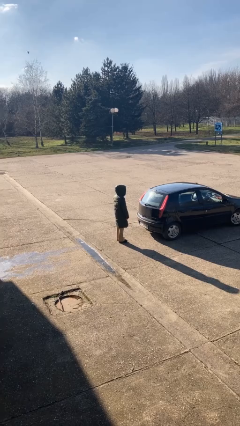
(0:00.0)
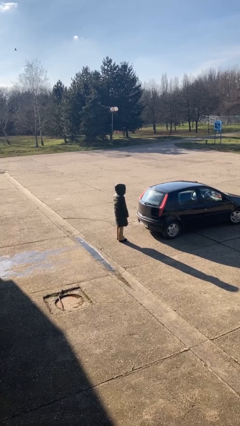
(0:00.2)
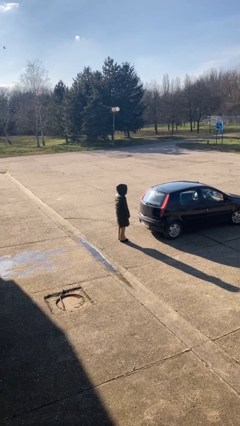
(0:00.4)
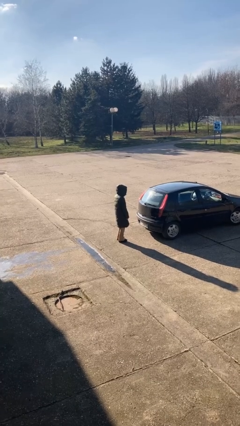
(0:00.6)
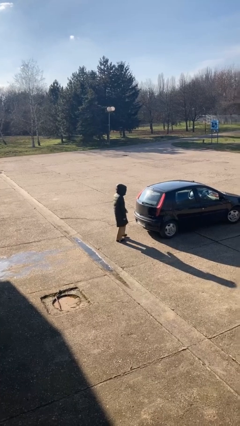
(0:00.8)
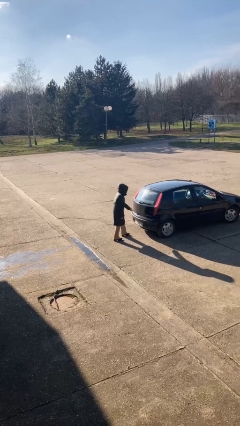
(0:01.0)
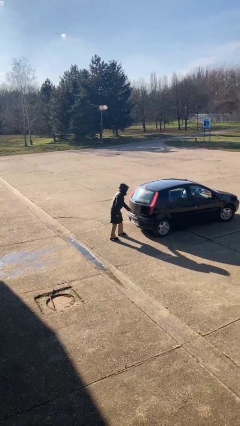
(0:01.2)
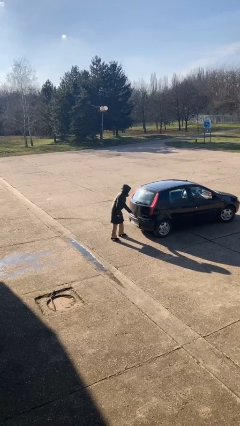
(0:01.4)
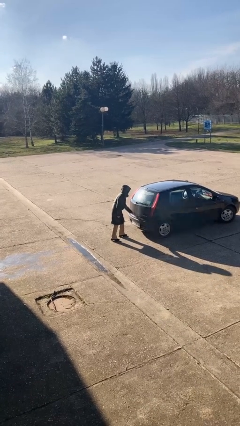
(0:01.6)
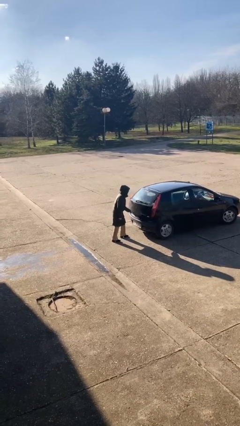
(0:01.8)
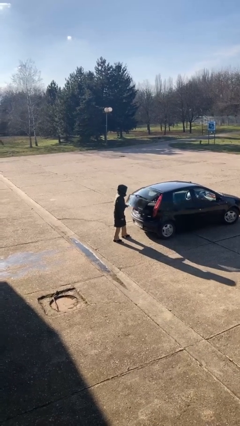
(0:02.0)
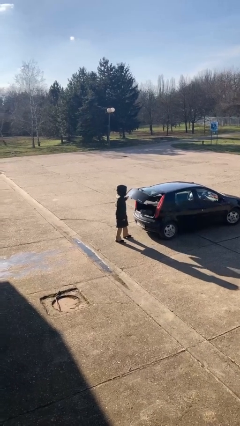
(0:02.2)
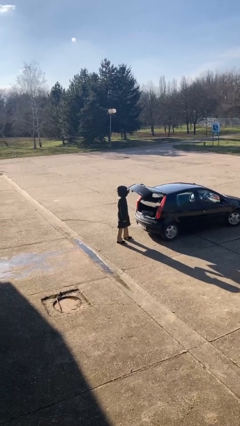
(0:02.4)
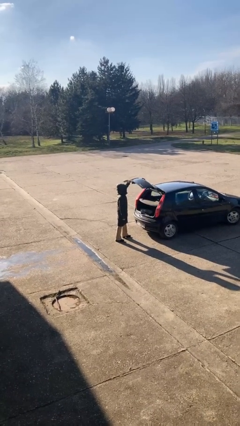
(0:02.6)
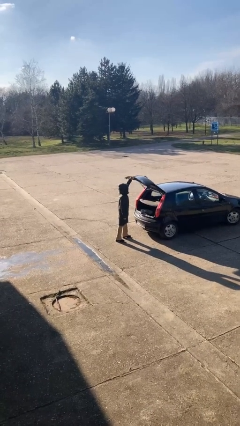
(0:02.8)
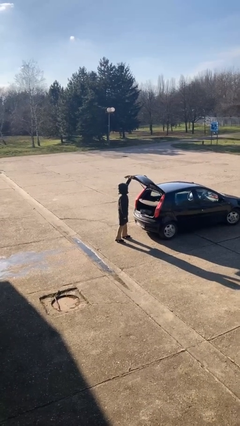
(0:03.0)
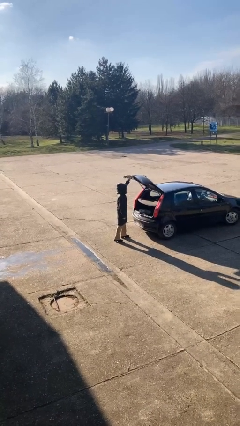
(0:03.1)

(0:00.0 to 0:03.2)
person opens car trunk

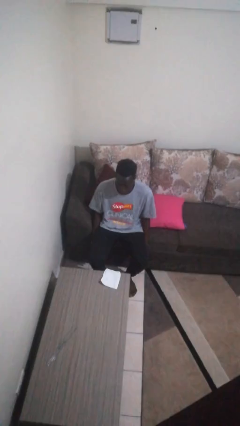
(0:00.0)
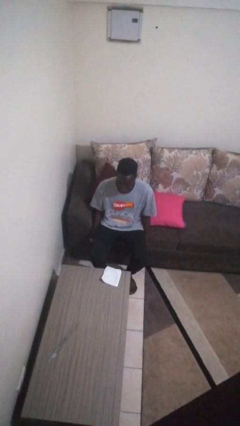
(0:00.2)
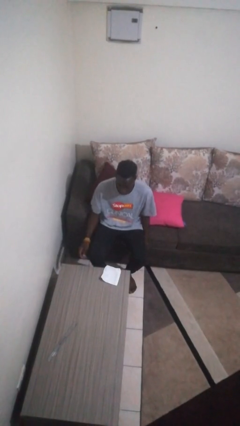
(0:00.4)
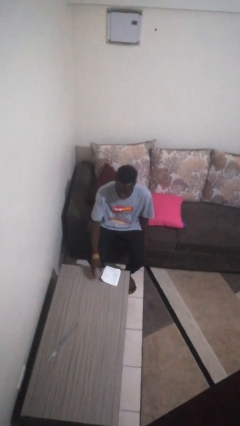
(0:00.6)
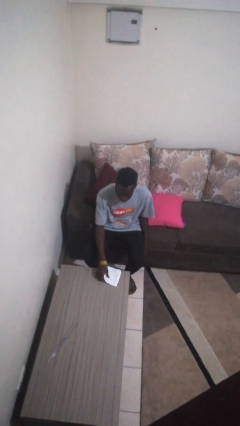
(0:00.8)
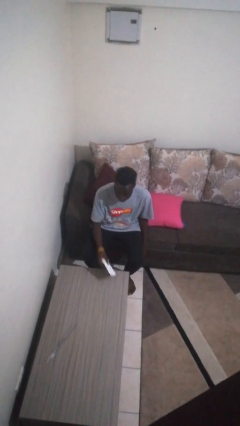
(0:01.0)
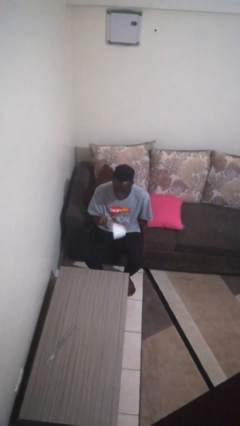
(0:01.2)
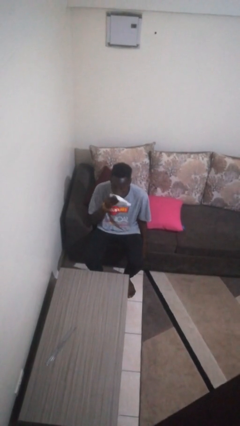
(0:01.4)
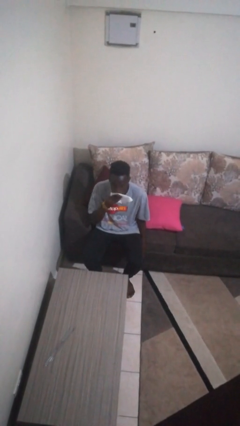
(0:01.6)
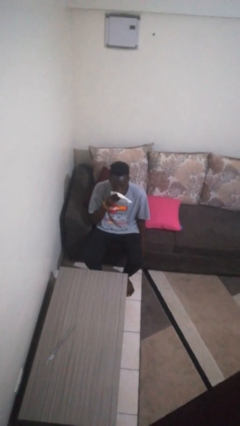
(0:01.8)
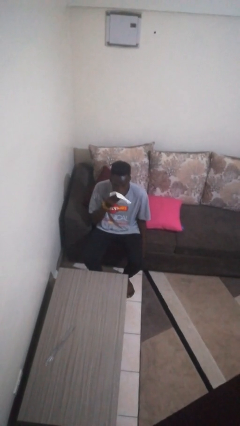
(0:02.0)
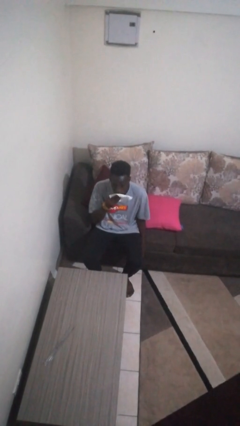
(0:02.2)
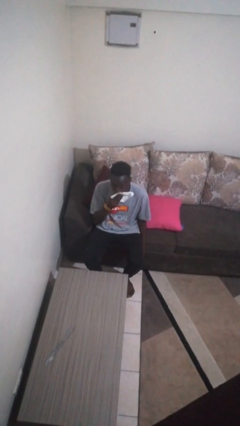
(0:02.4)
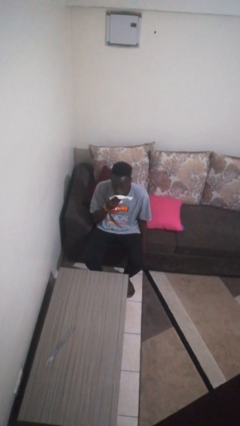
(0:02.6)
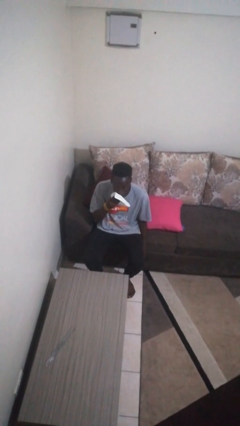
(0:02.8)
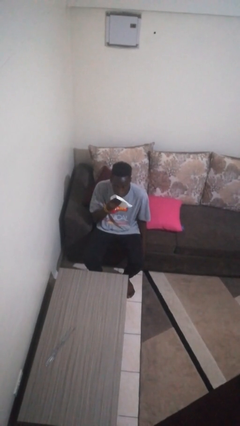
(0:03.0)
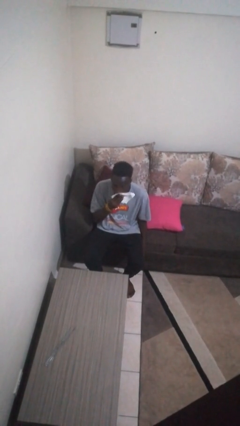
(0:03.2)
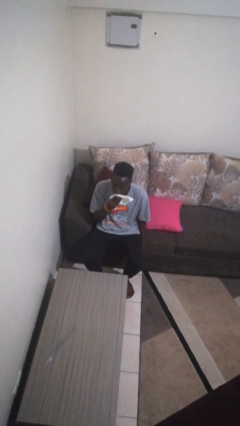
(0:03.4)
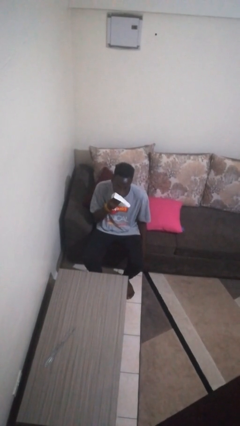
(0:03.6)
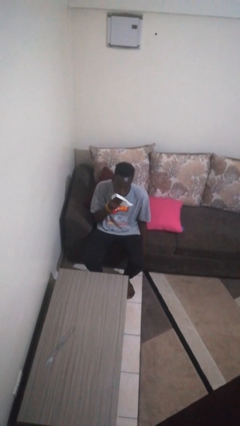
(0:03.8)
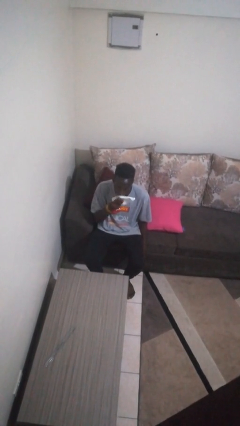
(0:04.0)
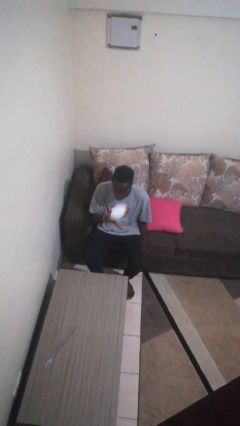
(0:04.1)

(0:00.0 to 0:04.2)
person wipes mouth with napkin

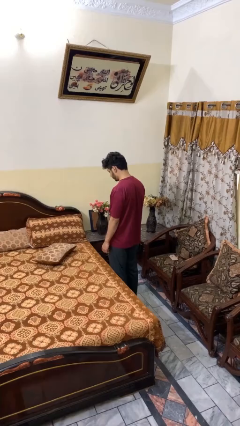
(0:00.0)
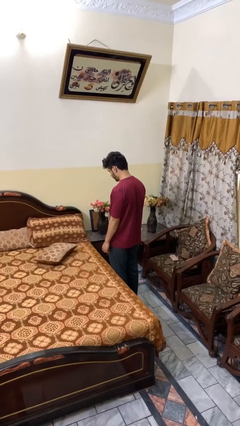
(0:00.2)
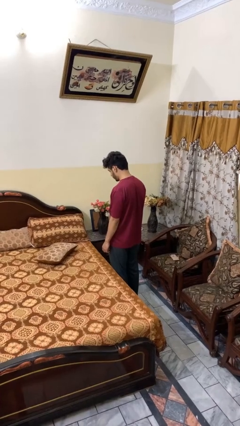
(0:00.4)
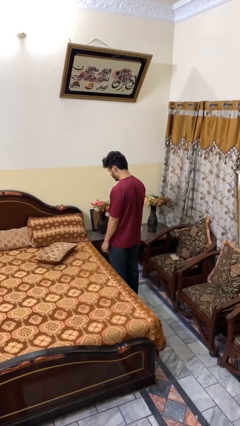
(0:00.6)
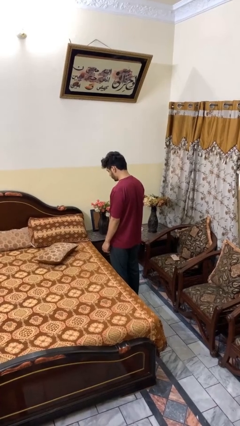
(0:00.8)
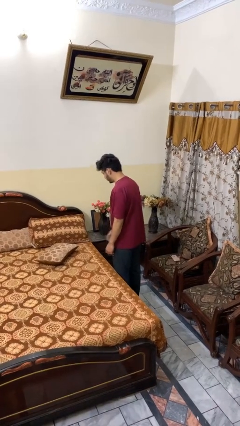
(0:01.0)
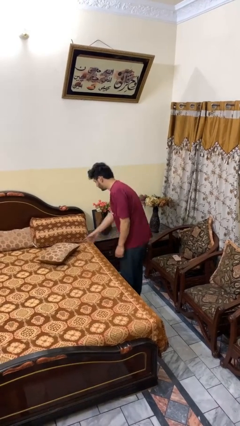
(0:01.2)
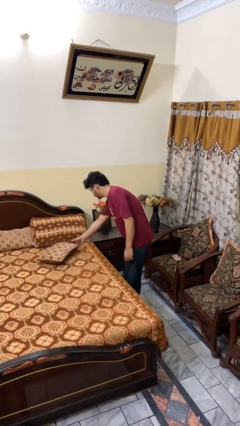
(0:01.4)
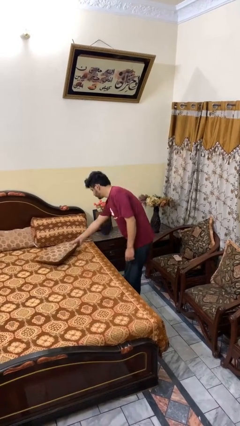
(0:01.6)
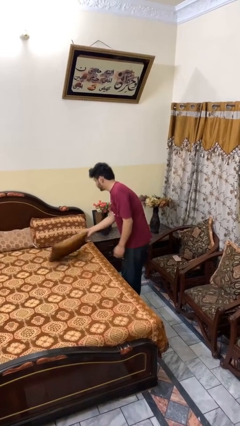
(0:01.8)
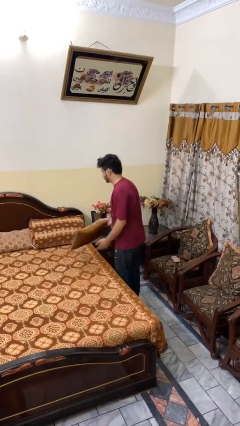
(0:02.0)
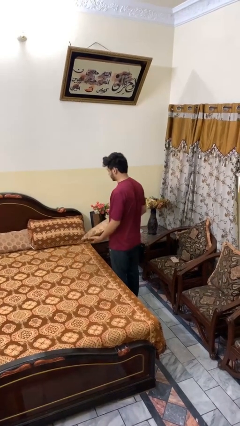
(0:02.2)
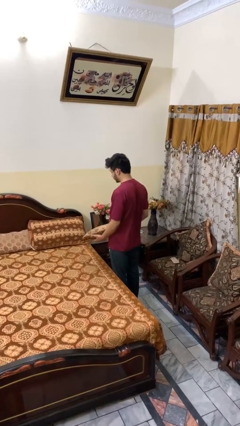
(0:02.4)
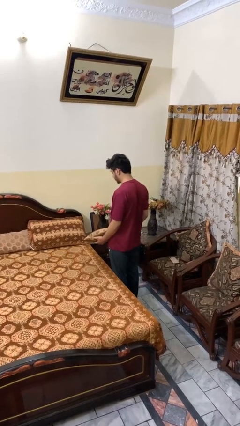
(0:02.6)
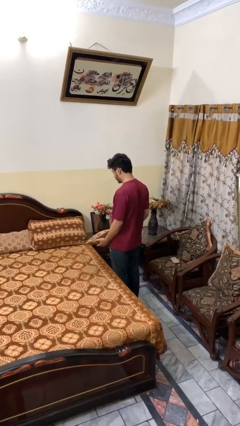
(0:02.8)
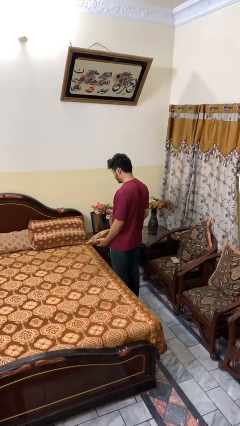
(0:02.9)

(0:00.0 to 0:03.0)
person picks up object from bed

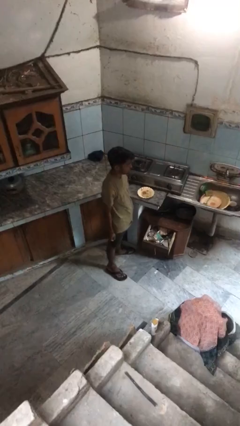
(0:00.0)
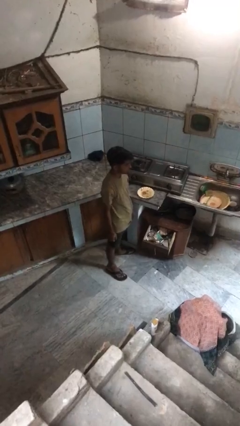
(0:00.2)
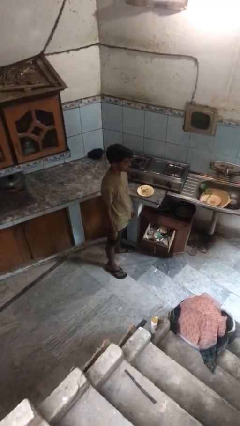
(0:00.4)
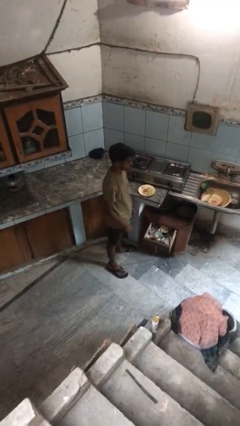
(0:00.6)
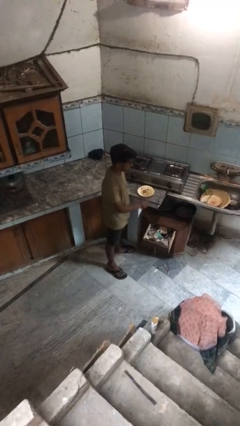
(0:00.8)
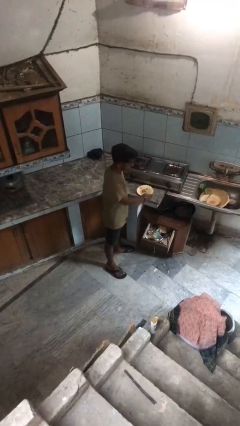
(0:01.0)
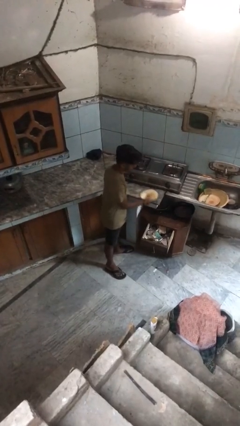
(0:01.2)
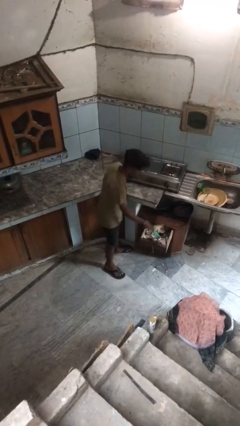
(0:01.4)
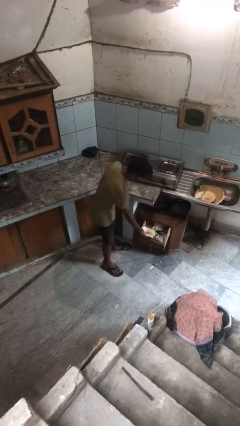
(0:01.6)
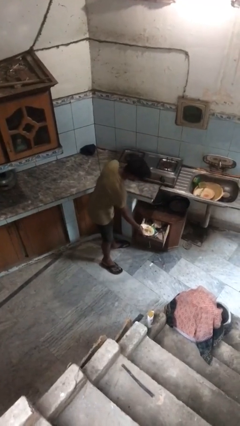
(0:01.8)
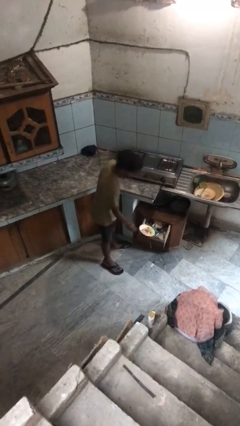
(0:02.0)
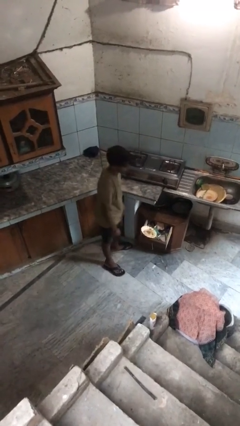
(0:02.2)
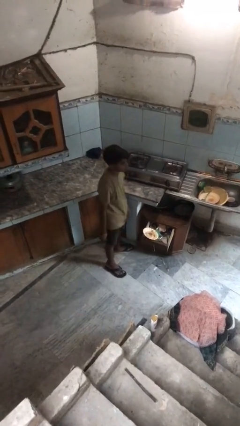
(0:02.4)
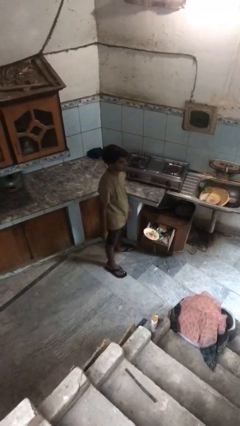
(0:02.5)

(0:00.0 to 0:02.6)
person puts object into kitchen drawer

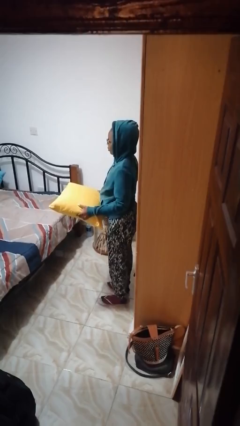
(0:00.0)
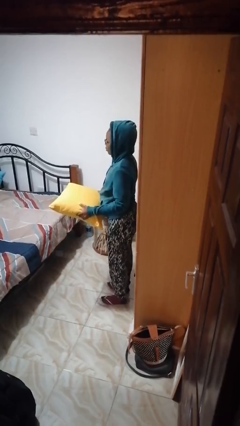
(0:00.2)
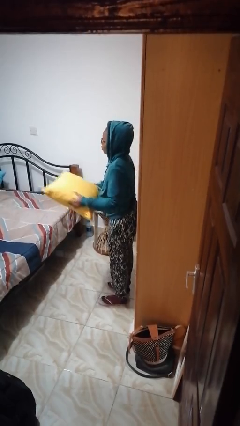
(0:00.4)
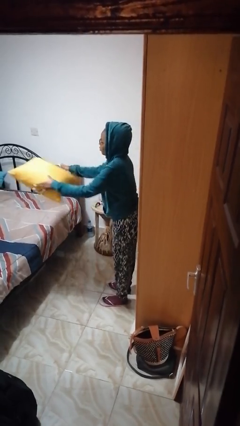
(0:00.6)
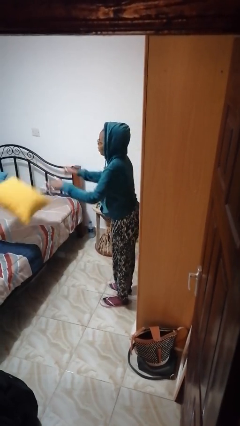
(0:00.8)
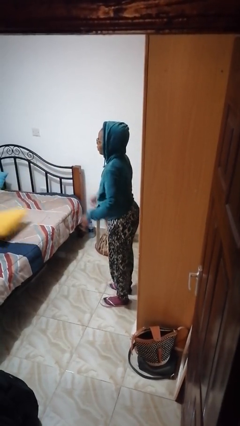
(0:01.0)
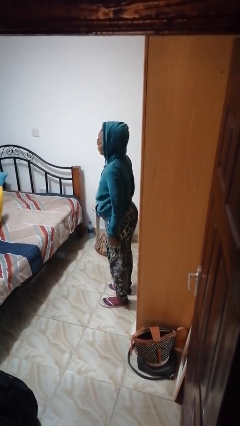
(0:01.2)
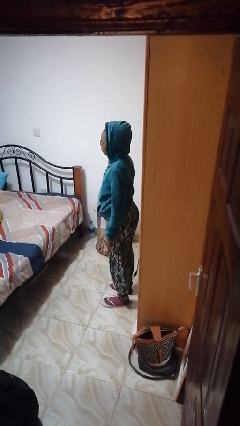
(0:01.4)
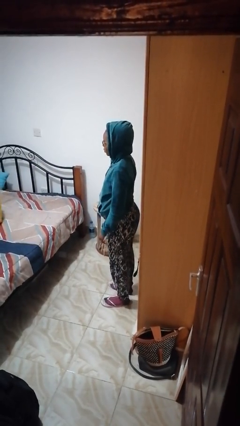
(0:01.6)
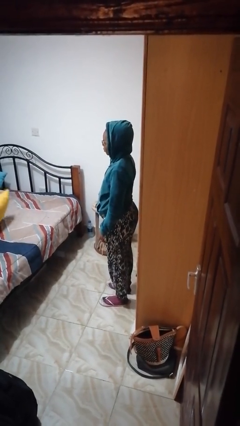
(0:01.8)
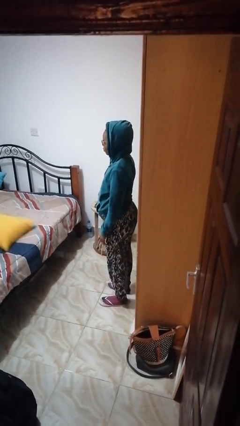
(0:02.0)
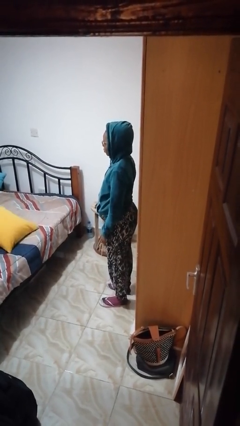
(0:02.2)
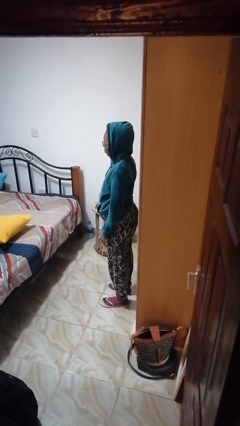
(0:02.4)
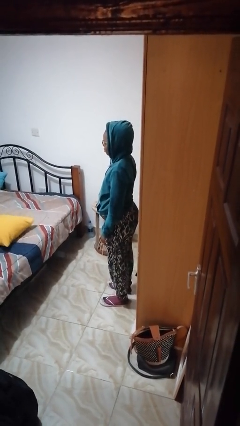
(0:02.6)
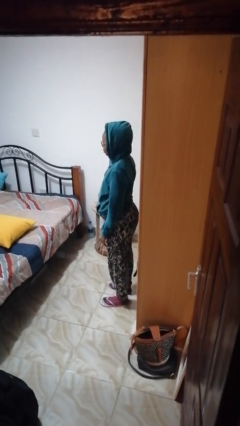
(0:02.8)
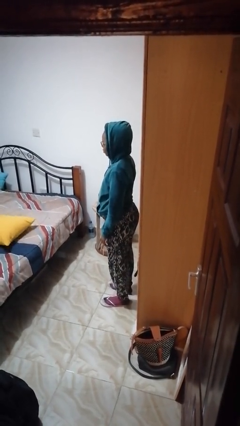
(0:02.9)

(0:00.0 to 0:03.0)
person throws object on bed

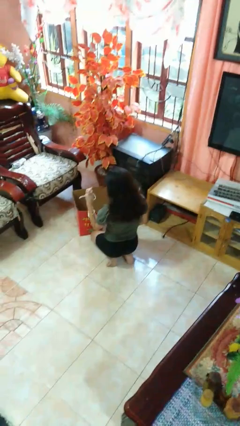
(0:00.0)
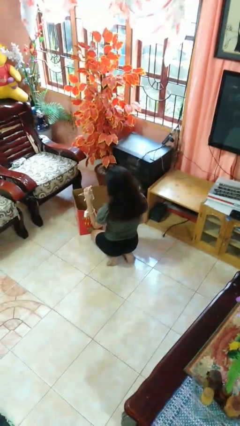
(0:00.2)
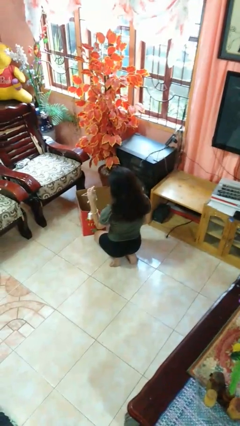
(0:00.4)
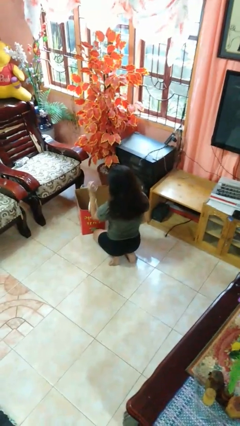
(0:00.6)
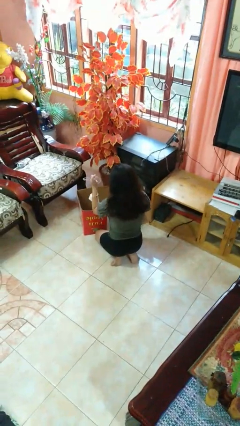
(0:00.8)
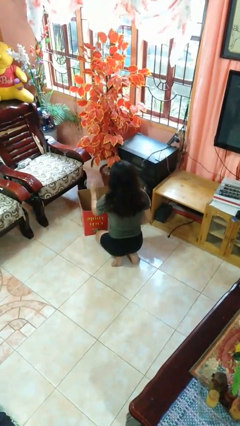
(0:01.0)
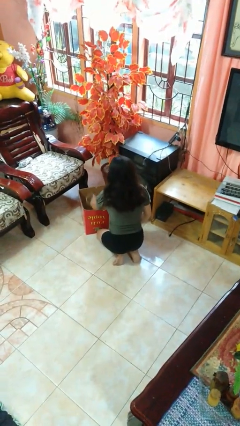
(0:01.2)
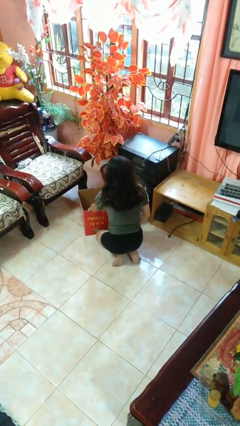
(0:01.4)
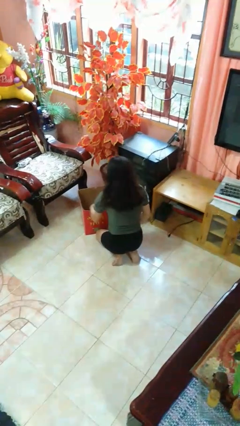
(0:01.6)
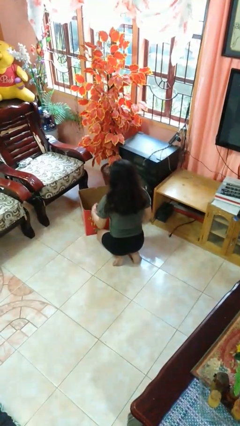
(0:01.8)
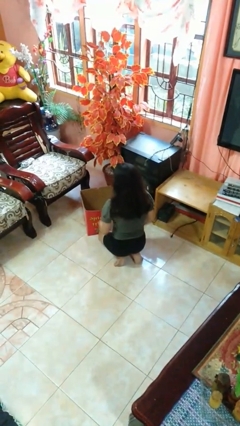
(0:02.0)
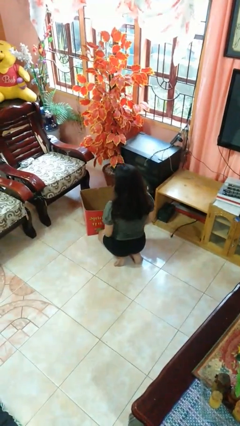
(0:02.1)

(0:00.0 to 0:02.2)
person puts object into box
